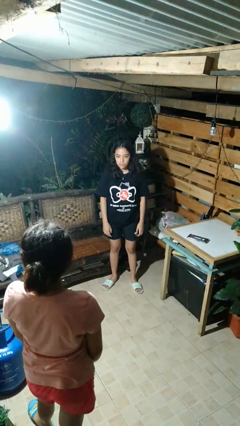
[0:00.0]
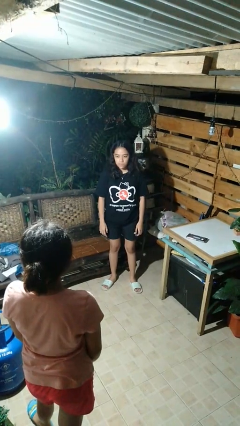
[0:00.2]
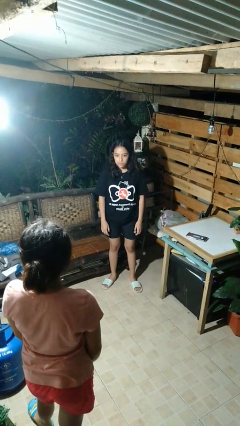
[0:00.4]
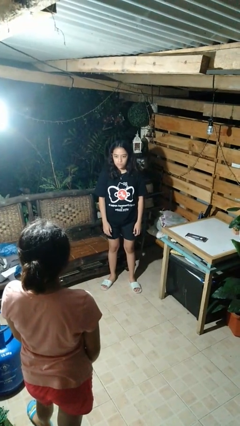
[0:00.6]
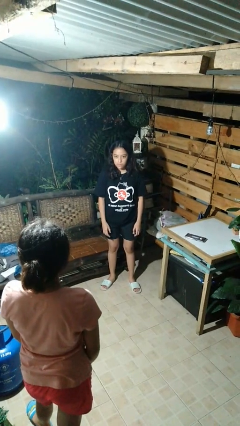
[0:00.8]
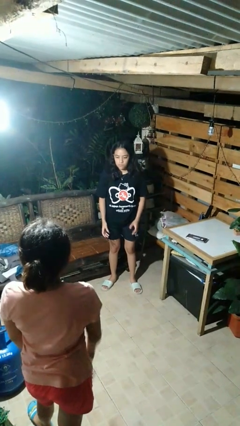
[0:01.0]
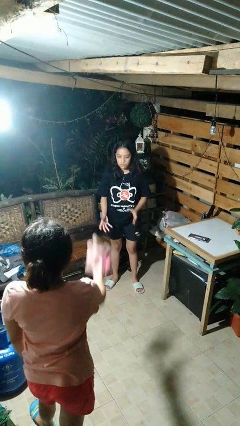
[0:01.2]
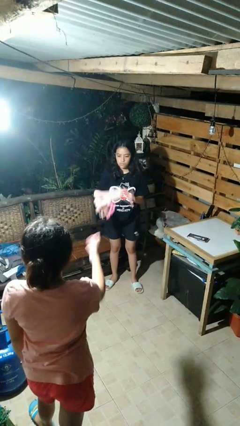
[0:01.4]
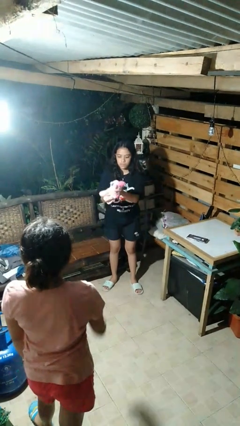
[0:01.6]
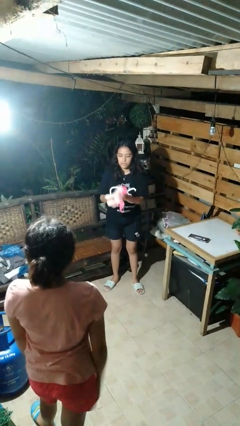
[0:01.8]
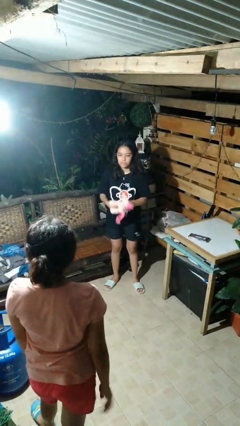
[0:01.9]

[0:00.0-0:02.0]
person catches object from person

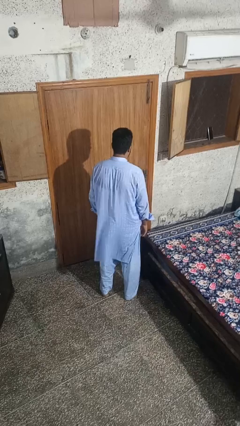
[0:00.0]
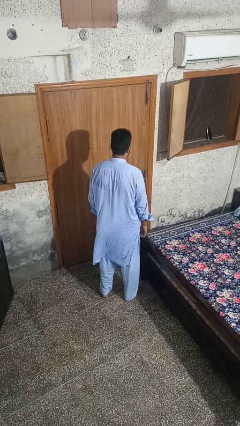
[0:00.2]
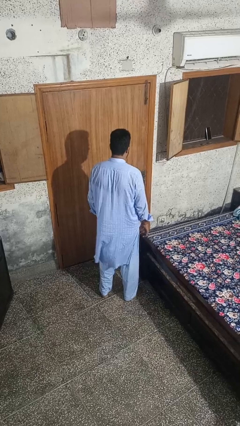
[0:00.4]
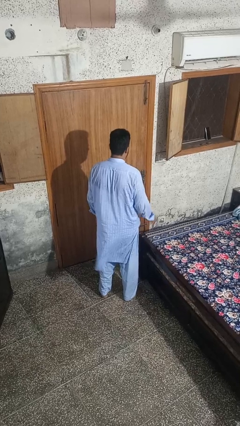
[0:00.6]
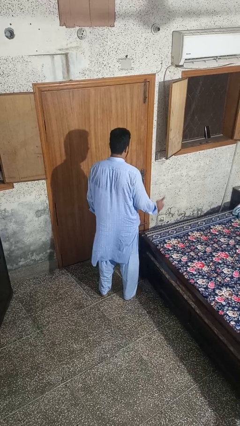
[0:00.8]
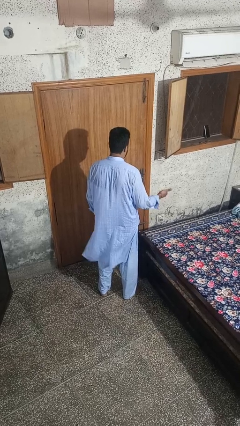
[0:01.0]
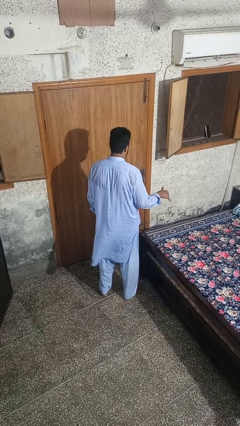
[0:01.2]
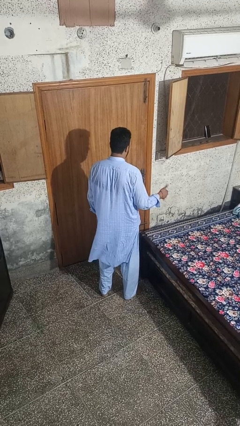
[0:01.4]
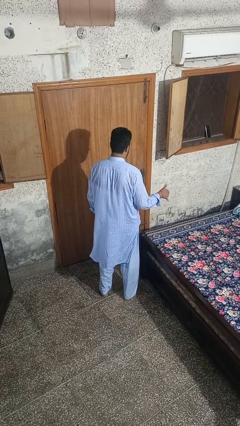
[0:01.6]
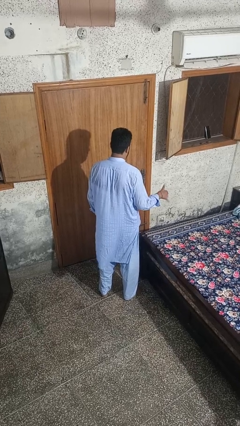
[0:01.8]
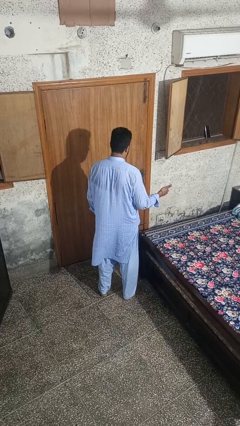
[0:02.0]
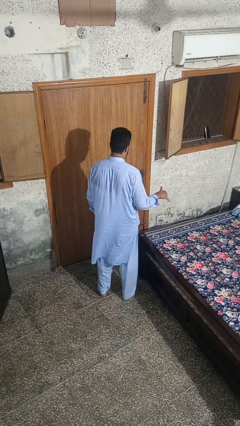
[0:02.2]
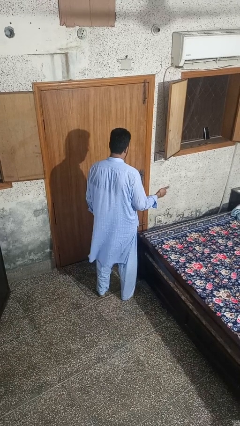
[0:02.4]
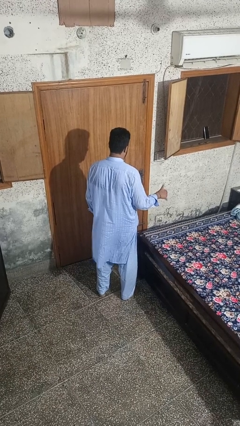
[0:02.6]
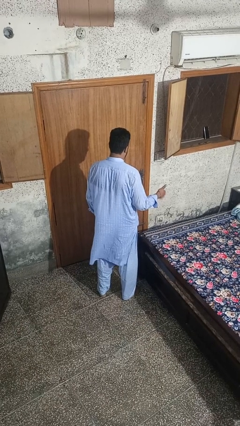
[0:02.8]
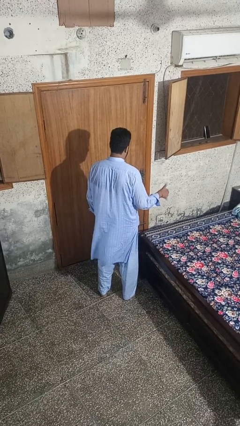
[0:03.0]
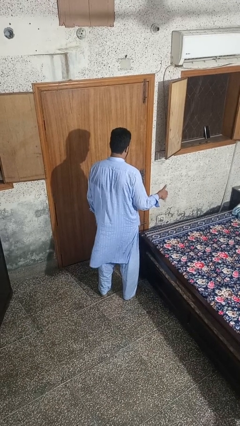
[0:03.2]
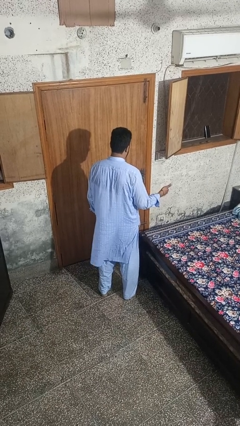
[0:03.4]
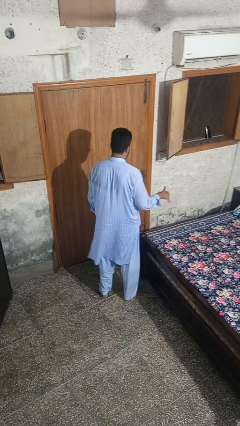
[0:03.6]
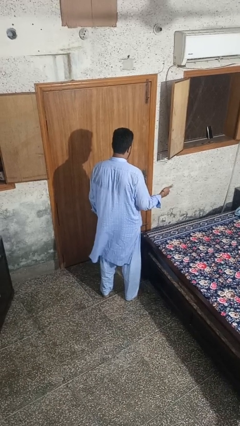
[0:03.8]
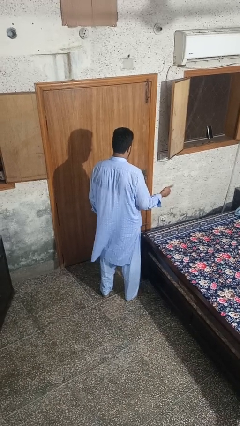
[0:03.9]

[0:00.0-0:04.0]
person gestures hang loose

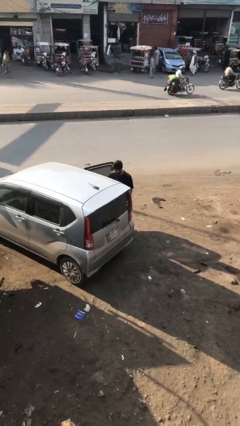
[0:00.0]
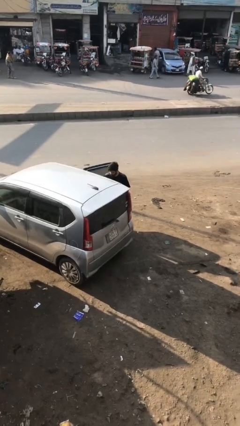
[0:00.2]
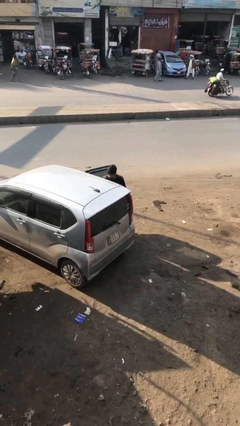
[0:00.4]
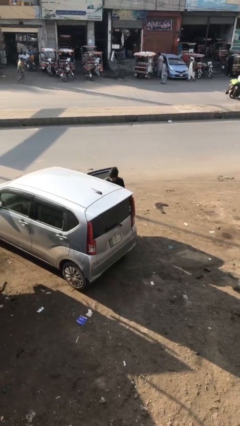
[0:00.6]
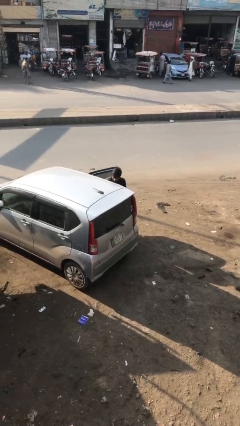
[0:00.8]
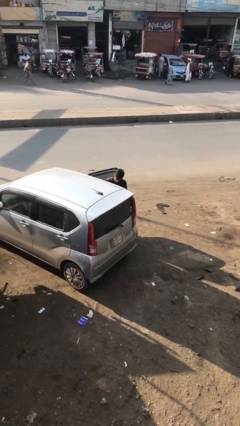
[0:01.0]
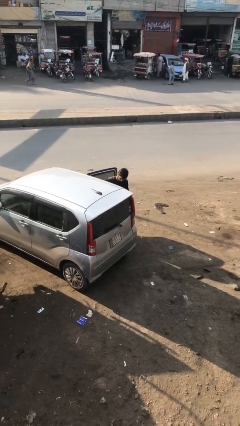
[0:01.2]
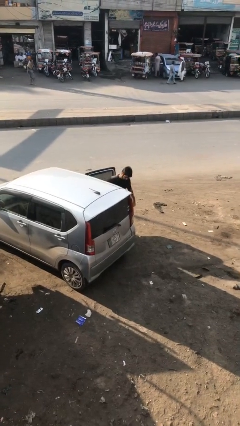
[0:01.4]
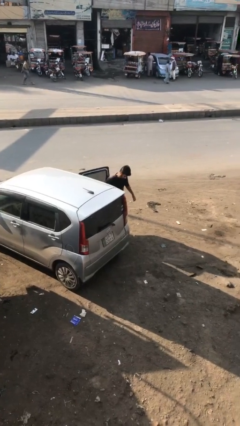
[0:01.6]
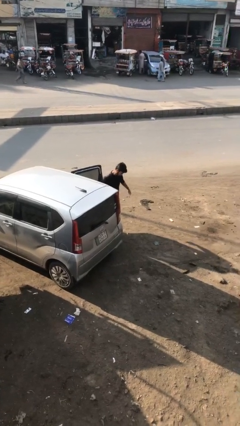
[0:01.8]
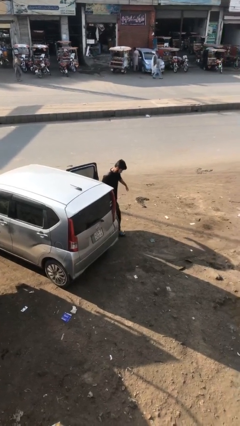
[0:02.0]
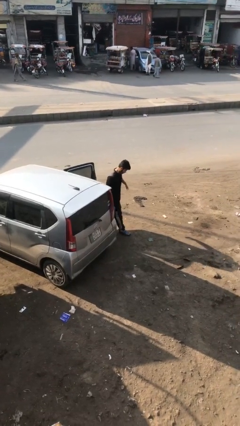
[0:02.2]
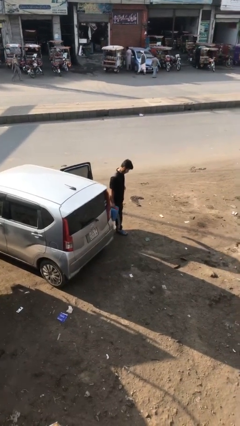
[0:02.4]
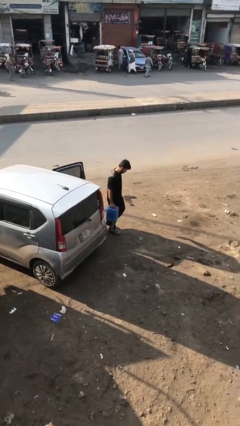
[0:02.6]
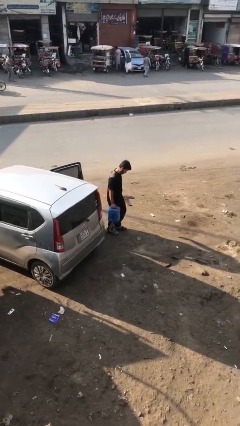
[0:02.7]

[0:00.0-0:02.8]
person unloads car

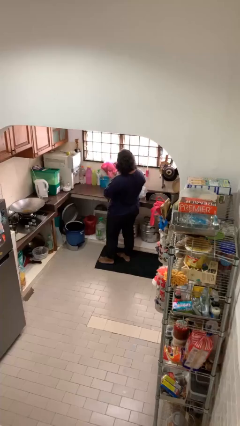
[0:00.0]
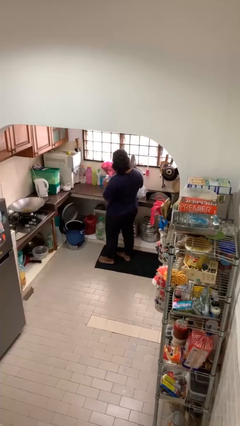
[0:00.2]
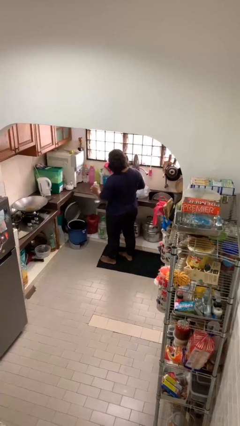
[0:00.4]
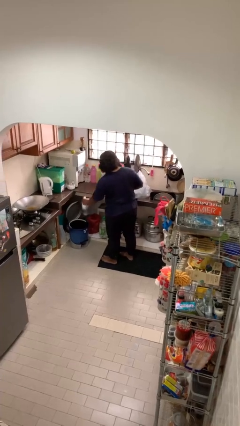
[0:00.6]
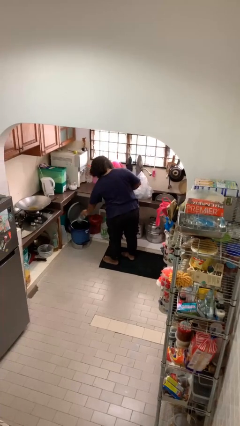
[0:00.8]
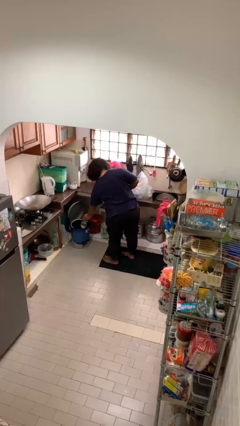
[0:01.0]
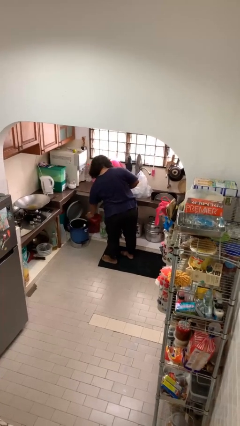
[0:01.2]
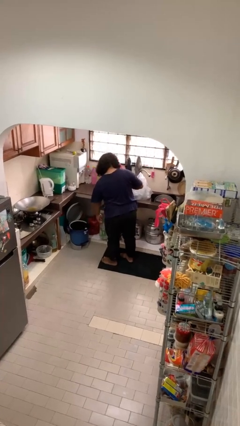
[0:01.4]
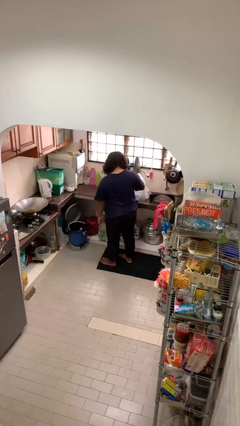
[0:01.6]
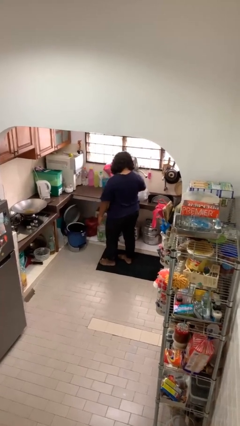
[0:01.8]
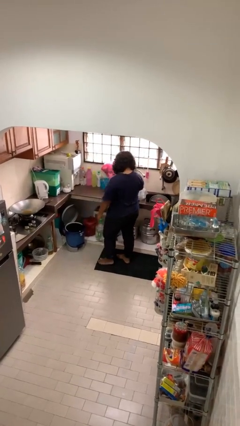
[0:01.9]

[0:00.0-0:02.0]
person discards trash

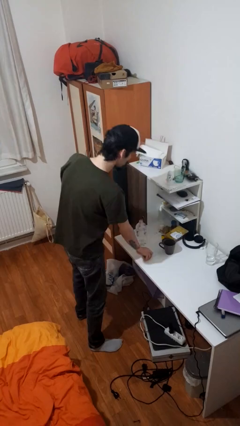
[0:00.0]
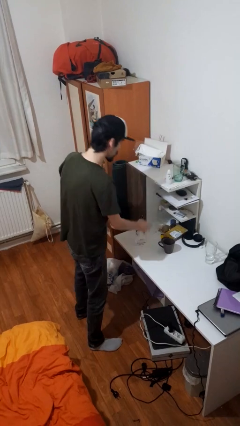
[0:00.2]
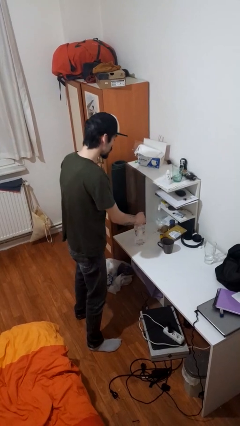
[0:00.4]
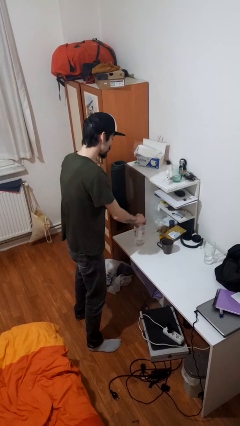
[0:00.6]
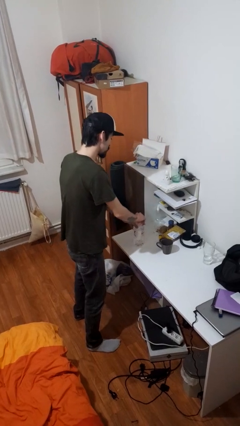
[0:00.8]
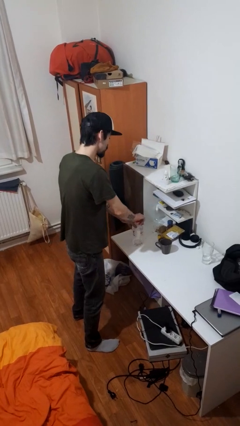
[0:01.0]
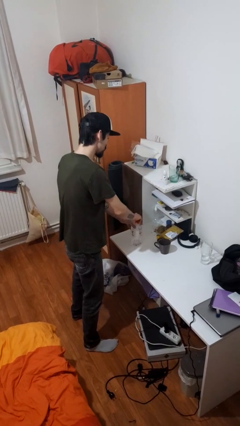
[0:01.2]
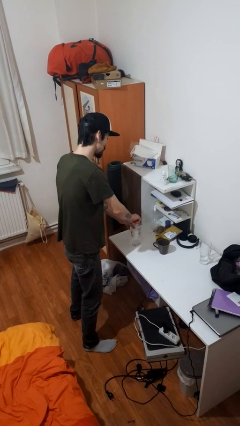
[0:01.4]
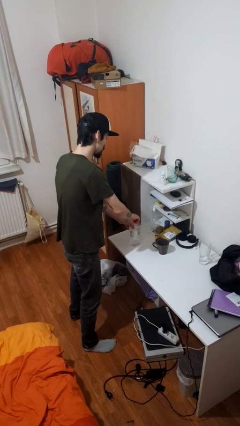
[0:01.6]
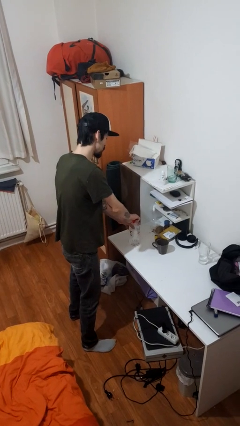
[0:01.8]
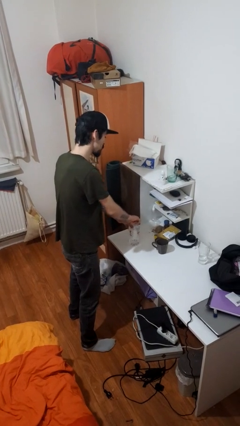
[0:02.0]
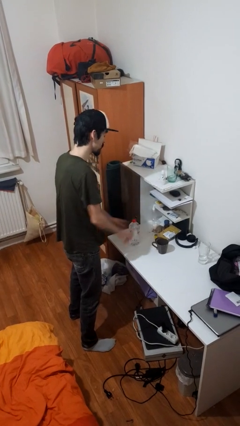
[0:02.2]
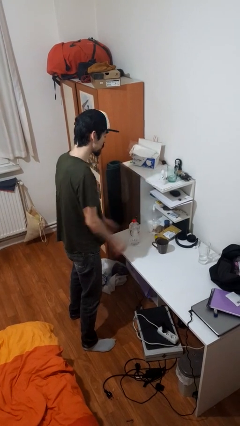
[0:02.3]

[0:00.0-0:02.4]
person screws lid to bottle

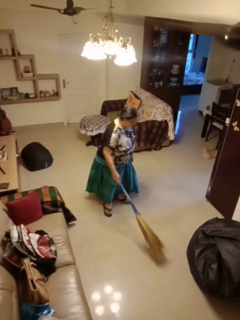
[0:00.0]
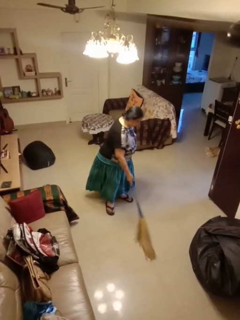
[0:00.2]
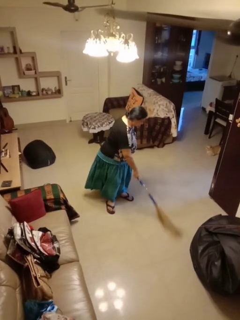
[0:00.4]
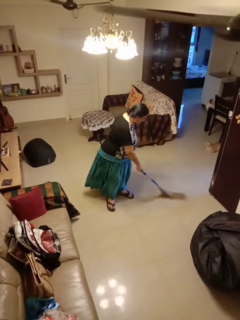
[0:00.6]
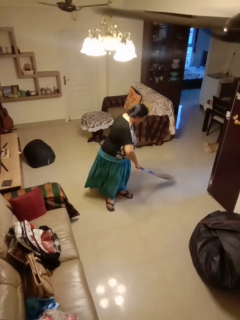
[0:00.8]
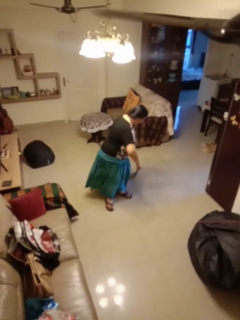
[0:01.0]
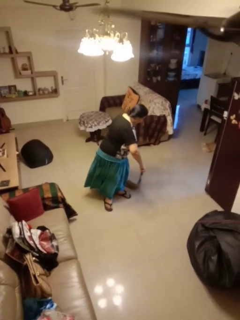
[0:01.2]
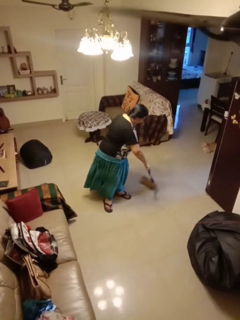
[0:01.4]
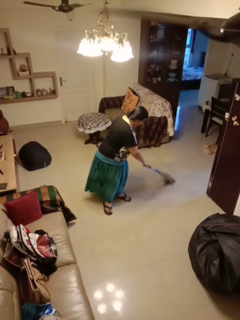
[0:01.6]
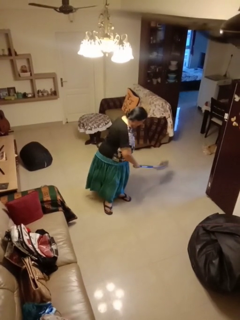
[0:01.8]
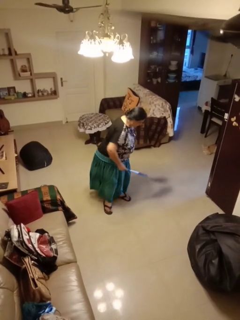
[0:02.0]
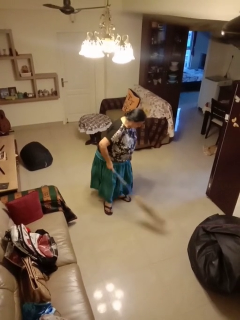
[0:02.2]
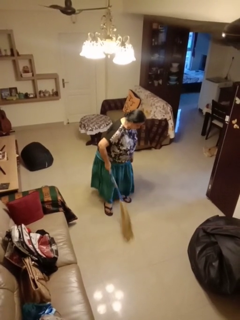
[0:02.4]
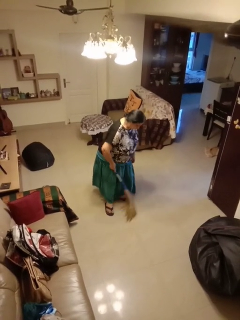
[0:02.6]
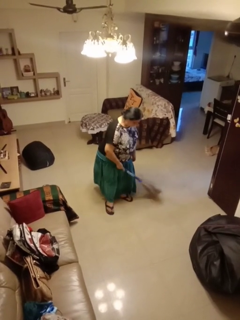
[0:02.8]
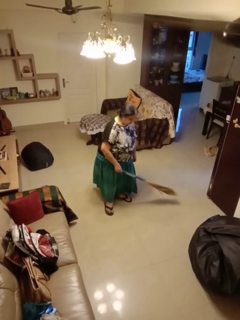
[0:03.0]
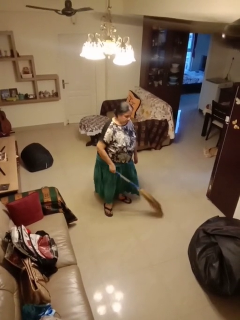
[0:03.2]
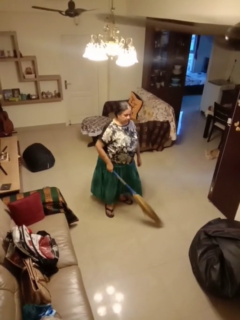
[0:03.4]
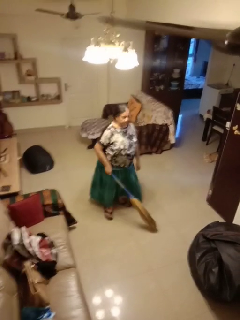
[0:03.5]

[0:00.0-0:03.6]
person sweeps floor

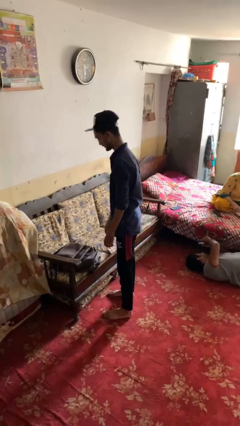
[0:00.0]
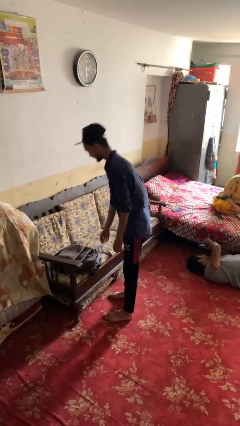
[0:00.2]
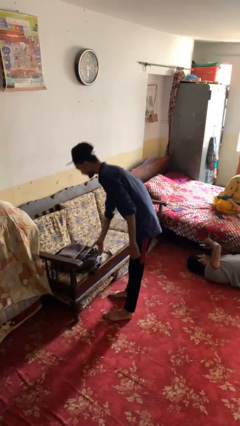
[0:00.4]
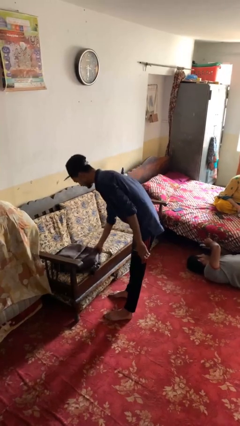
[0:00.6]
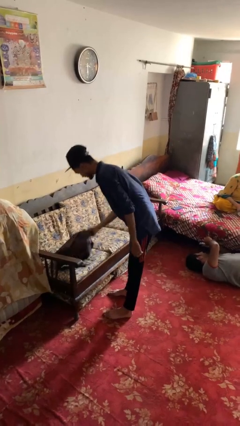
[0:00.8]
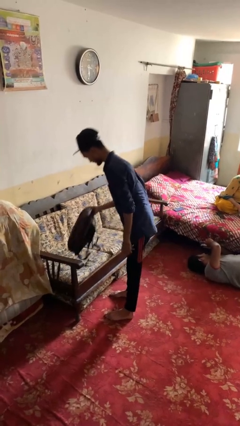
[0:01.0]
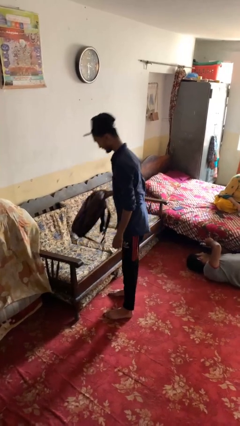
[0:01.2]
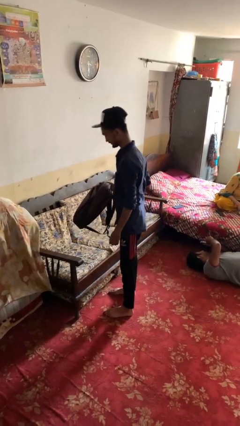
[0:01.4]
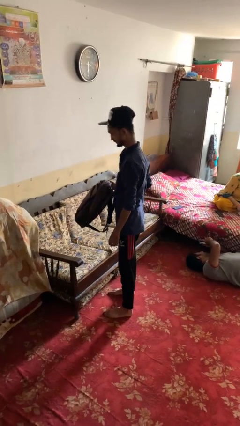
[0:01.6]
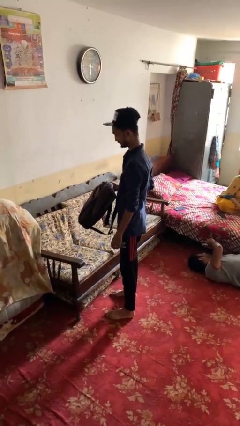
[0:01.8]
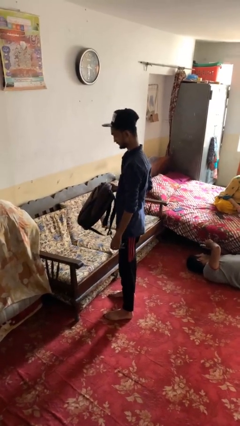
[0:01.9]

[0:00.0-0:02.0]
person picks up object from couch
